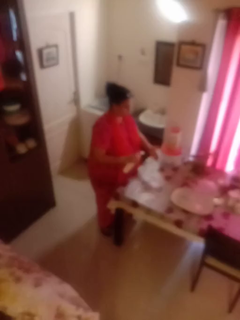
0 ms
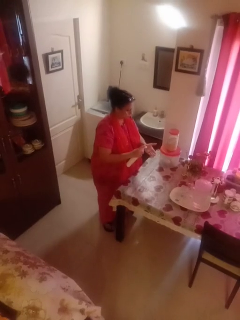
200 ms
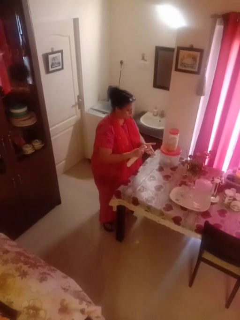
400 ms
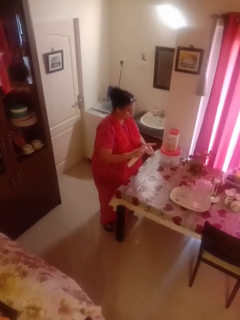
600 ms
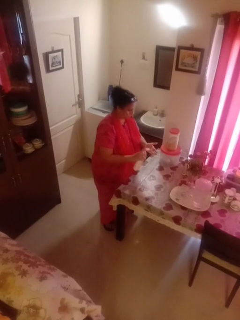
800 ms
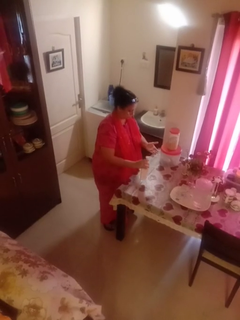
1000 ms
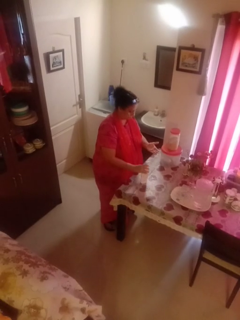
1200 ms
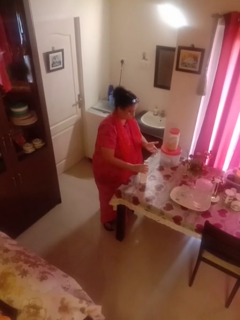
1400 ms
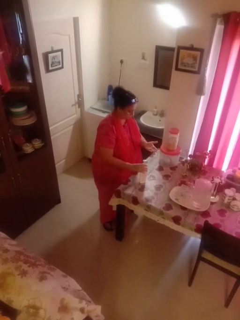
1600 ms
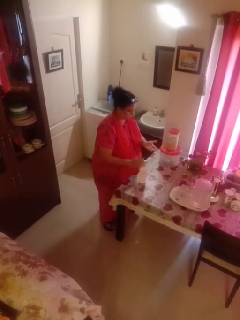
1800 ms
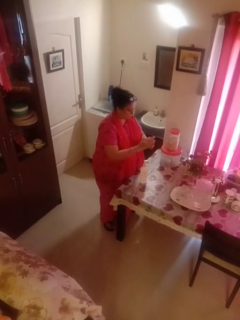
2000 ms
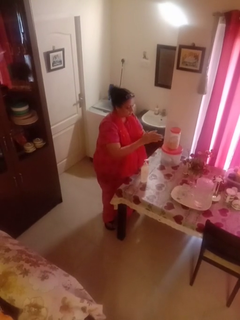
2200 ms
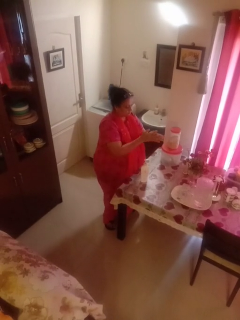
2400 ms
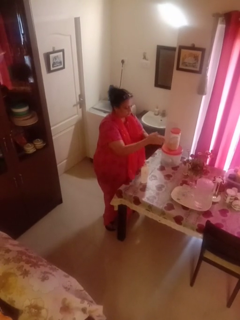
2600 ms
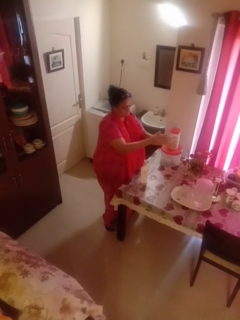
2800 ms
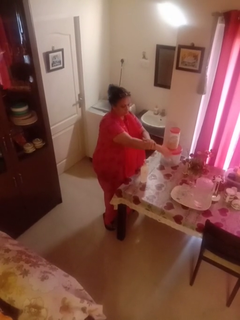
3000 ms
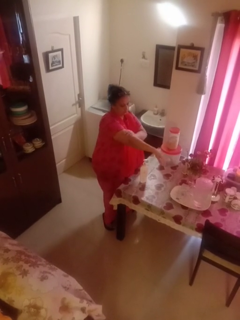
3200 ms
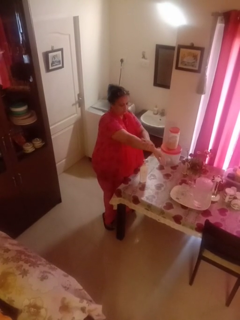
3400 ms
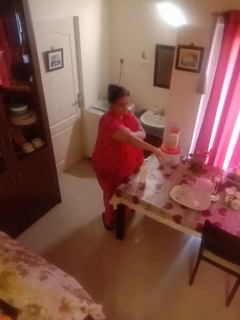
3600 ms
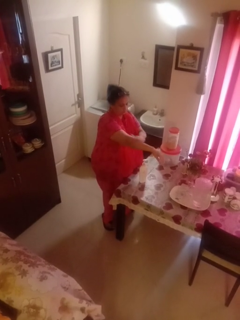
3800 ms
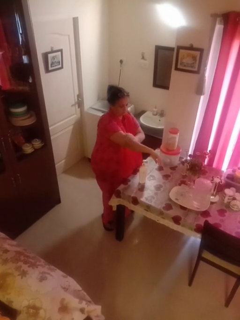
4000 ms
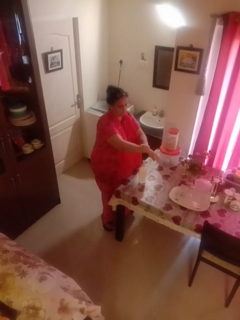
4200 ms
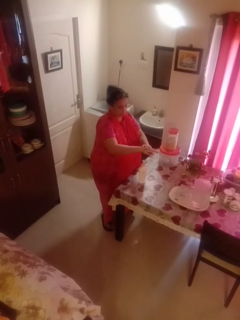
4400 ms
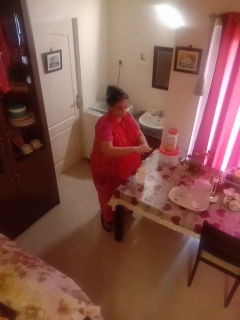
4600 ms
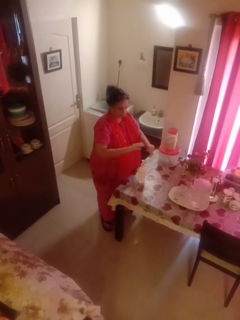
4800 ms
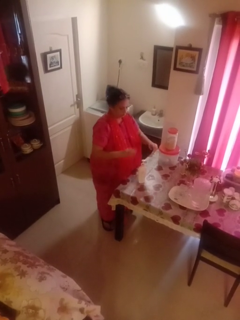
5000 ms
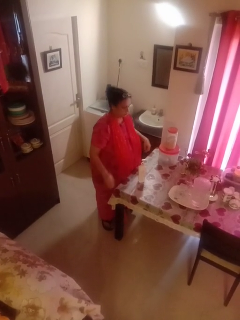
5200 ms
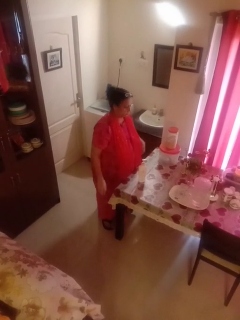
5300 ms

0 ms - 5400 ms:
person applies sunscreen

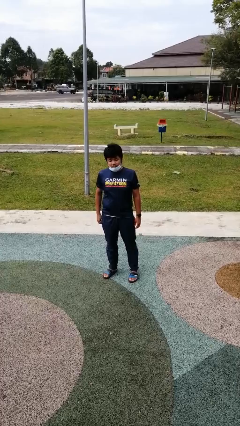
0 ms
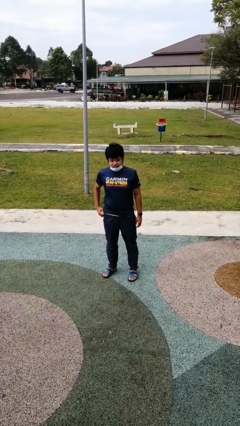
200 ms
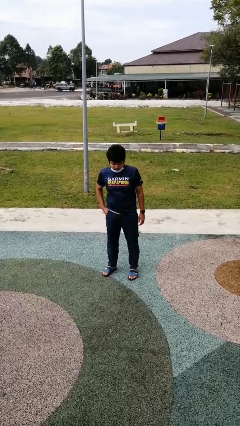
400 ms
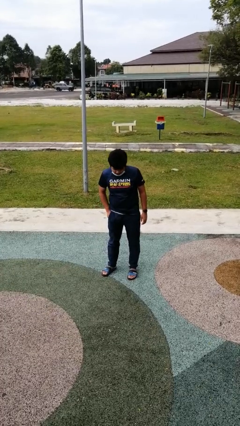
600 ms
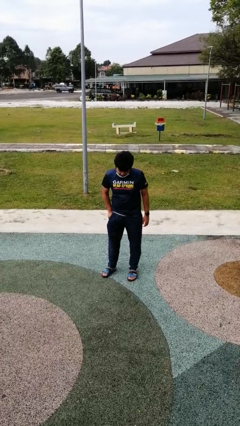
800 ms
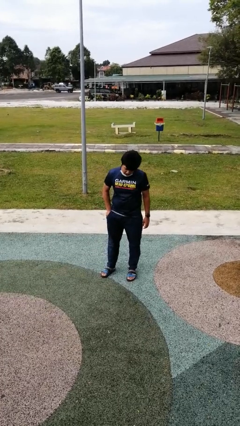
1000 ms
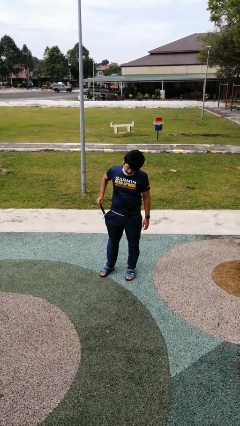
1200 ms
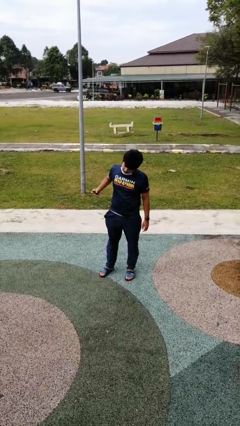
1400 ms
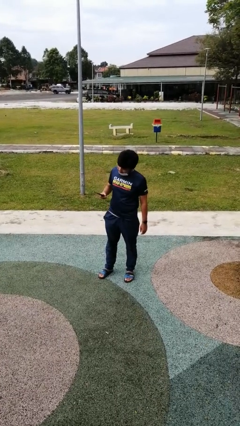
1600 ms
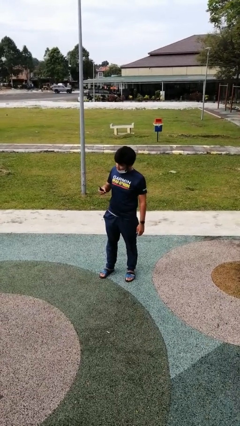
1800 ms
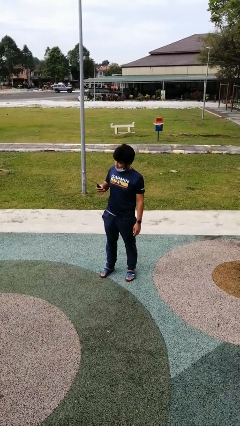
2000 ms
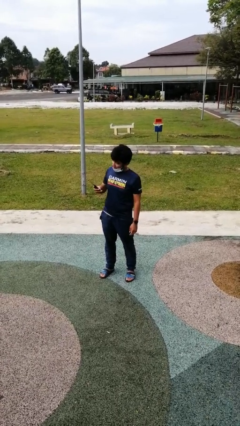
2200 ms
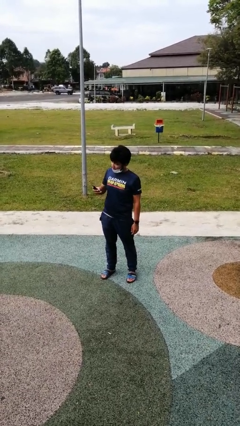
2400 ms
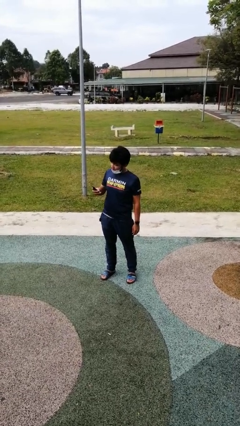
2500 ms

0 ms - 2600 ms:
person takes phone from pocket

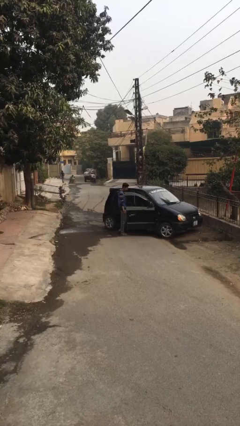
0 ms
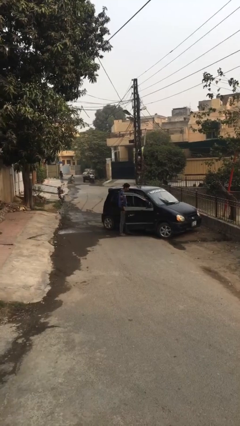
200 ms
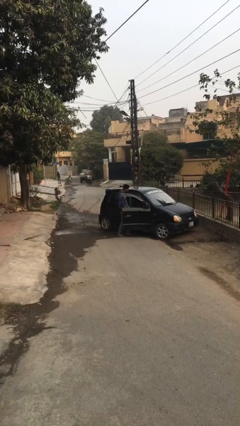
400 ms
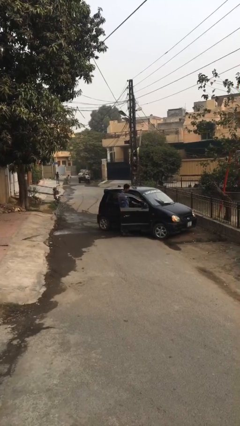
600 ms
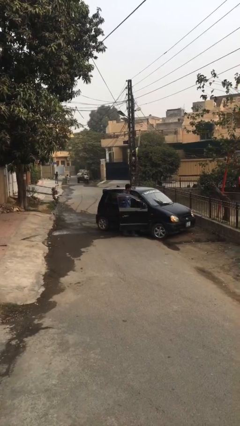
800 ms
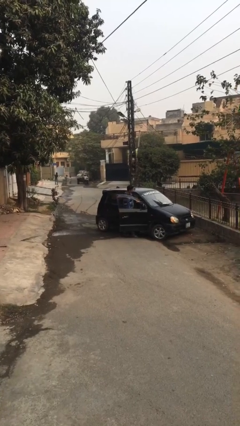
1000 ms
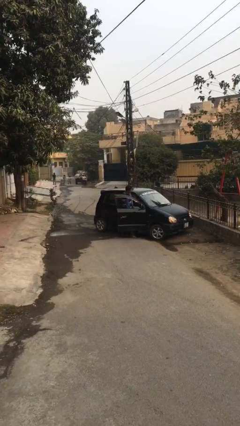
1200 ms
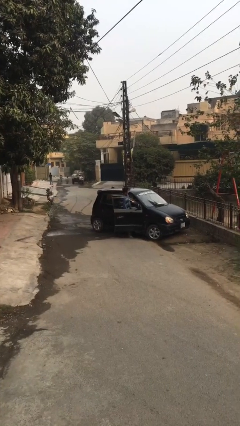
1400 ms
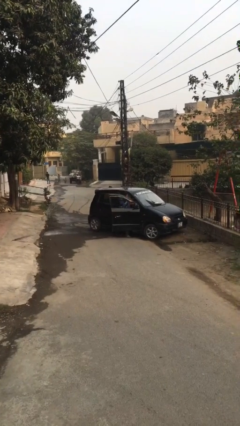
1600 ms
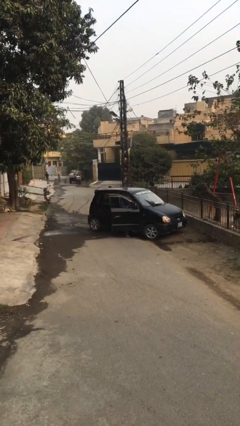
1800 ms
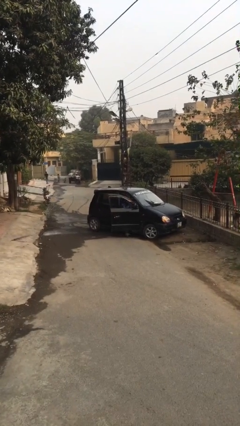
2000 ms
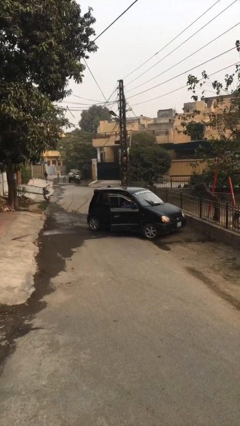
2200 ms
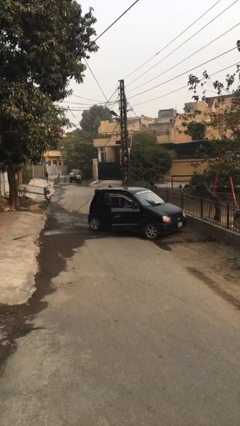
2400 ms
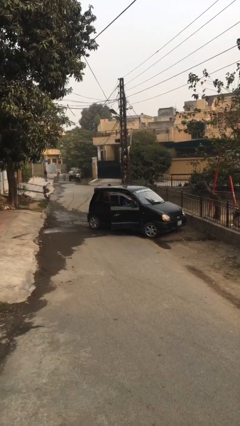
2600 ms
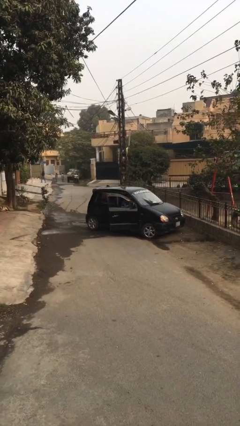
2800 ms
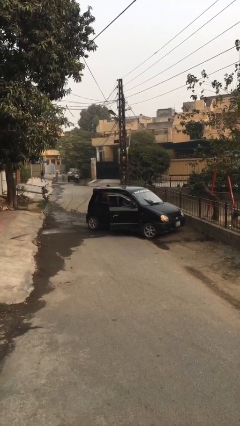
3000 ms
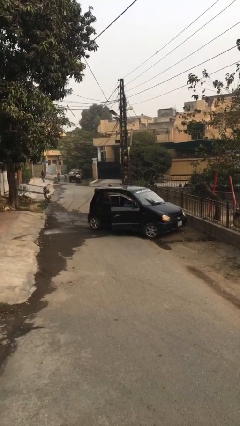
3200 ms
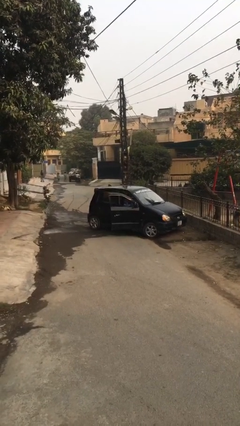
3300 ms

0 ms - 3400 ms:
person enters car

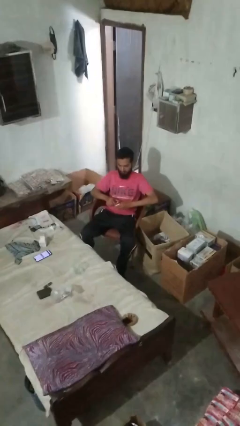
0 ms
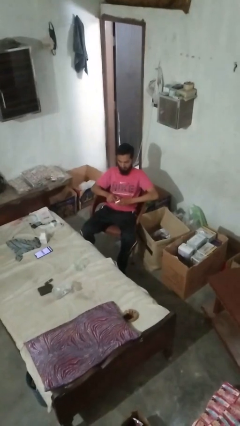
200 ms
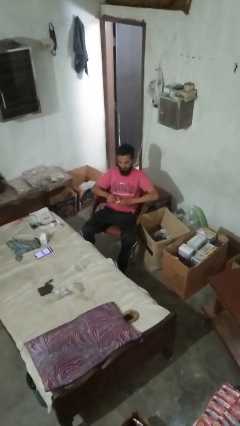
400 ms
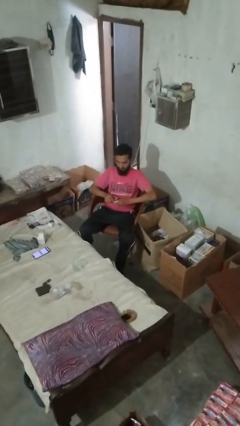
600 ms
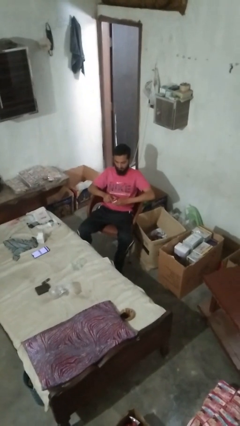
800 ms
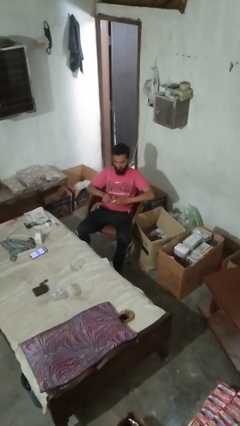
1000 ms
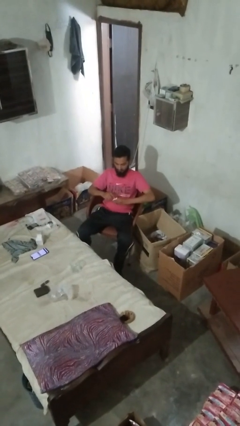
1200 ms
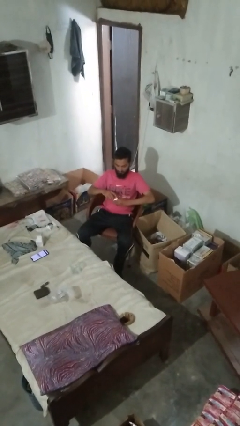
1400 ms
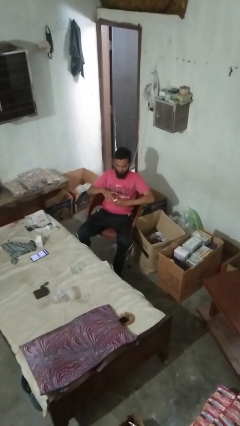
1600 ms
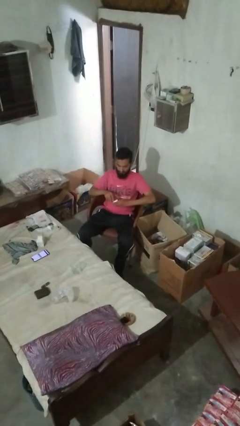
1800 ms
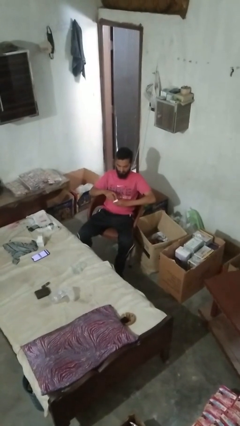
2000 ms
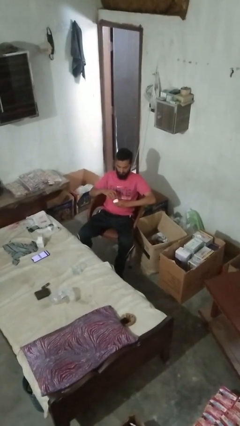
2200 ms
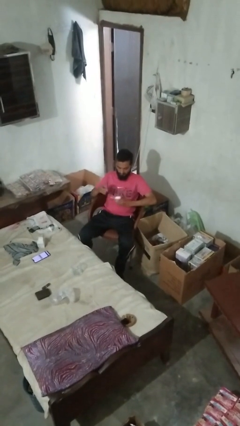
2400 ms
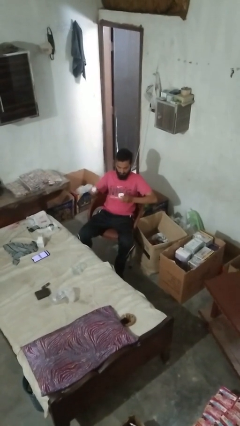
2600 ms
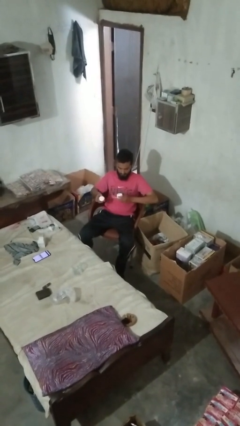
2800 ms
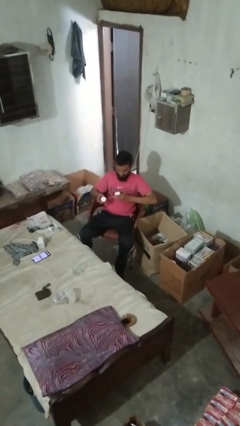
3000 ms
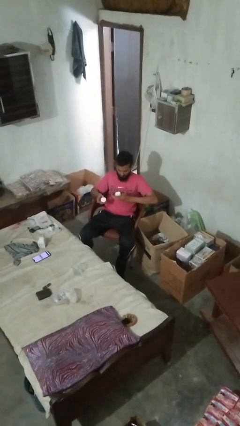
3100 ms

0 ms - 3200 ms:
person opens jar

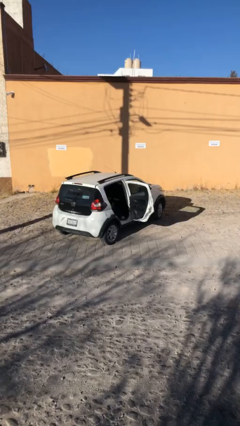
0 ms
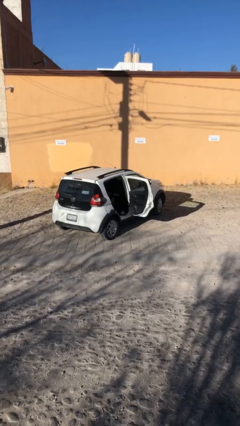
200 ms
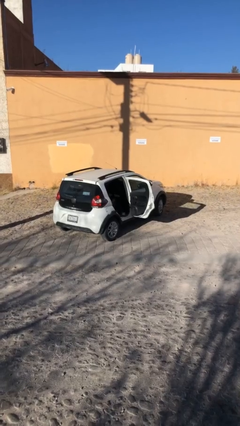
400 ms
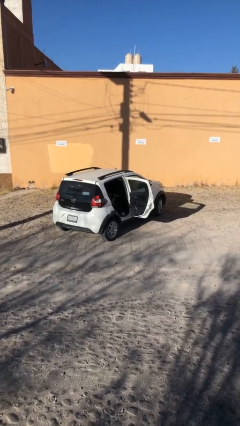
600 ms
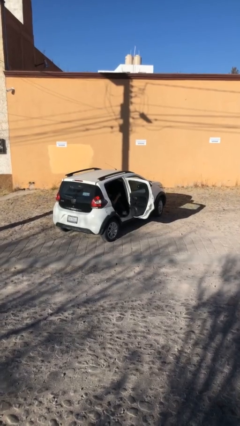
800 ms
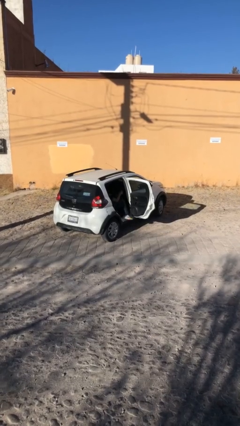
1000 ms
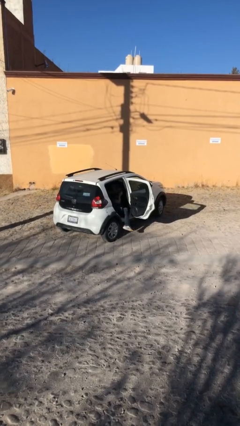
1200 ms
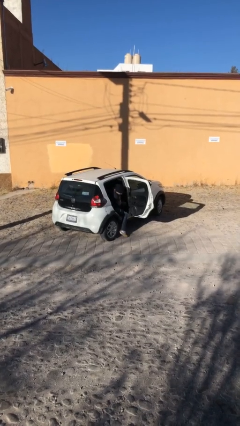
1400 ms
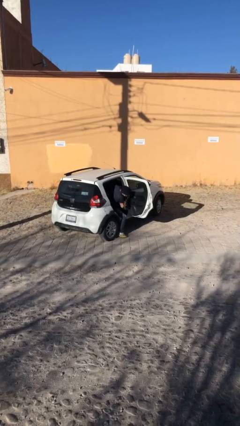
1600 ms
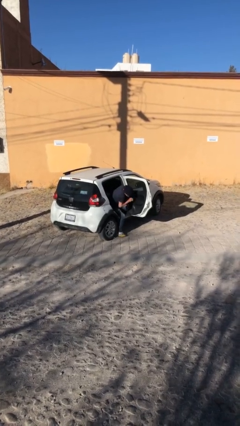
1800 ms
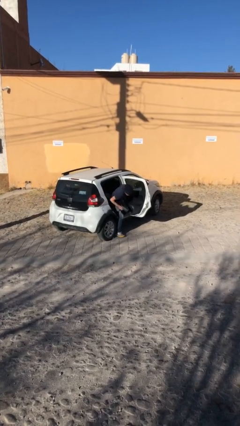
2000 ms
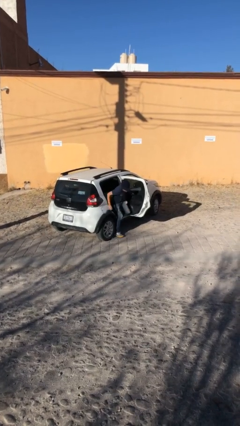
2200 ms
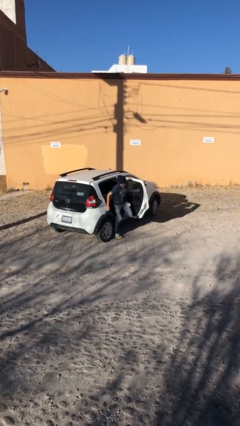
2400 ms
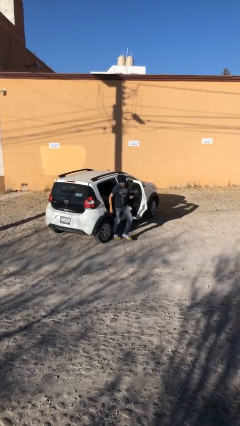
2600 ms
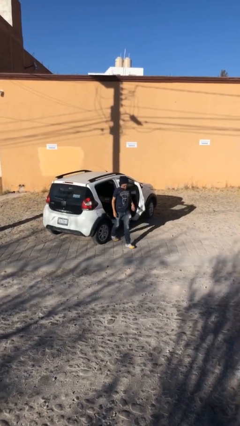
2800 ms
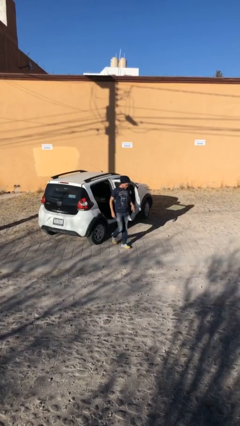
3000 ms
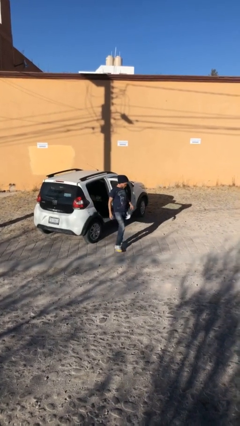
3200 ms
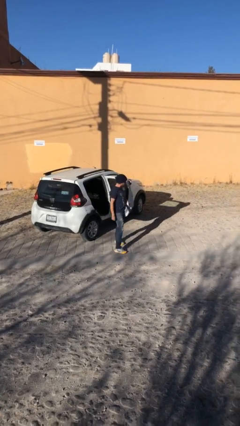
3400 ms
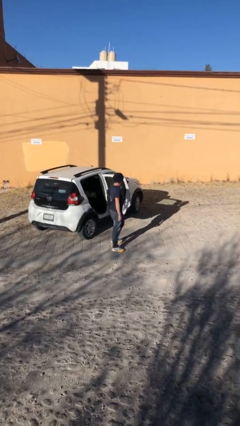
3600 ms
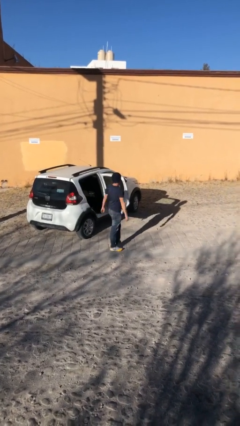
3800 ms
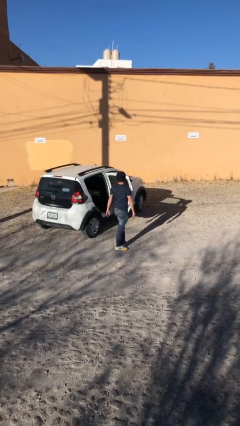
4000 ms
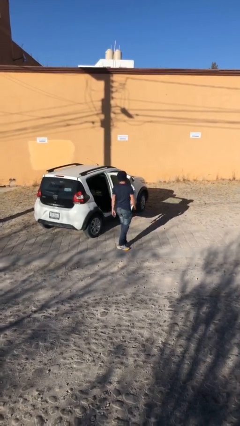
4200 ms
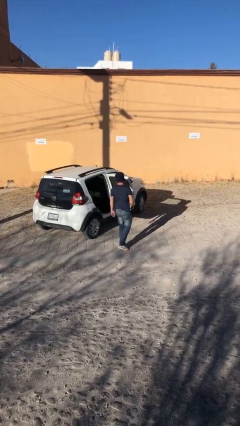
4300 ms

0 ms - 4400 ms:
person exits car
